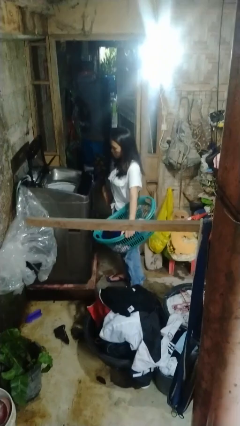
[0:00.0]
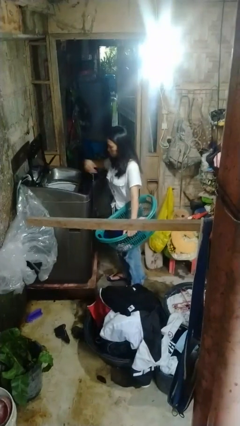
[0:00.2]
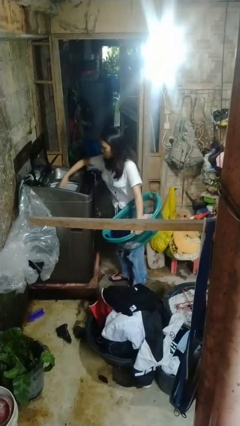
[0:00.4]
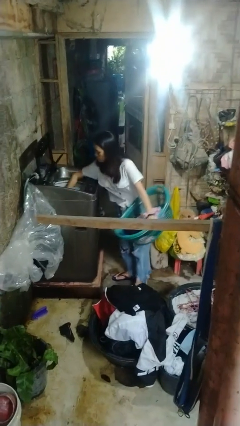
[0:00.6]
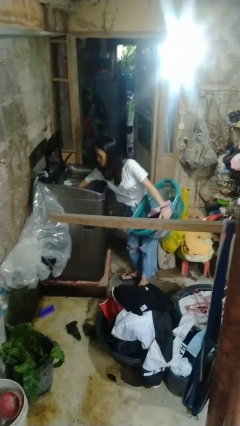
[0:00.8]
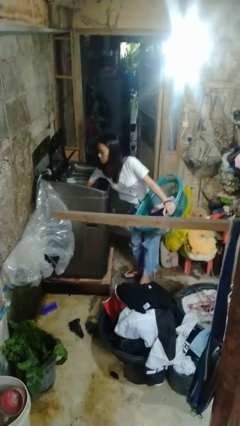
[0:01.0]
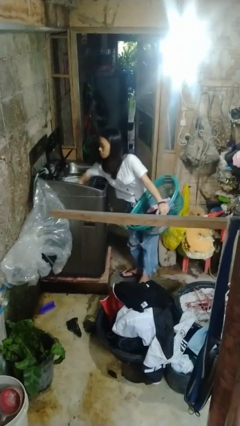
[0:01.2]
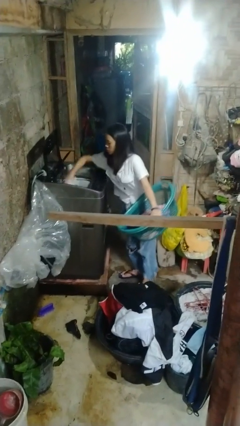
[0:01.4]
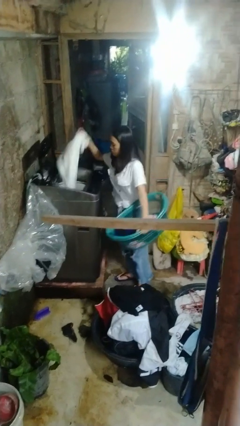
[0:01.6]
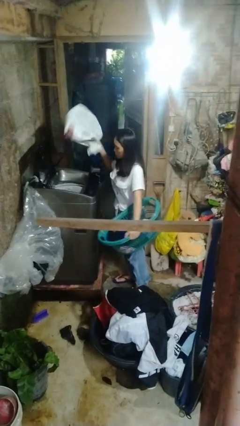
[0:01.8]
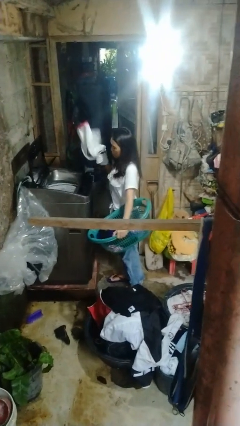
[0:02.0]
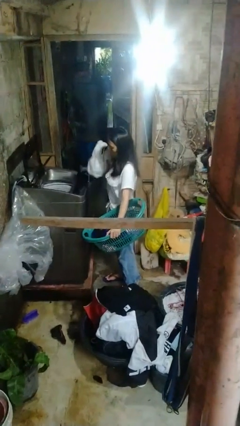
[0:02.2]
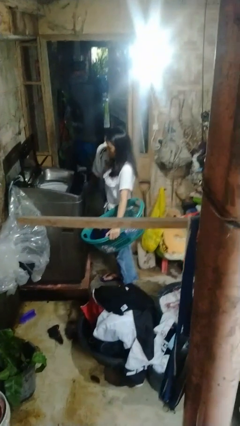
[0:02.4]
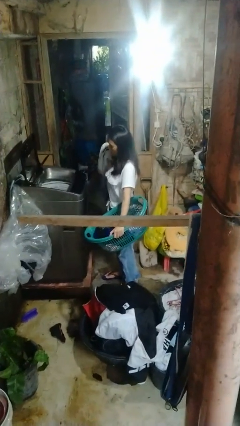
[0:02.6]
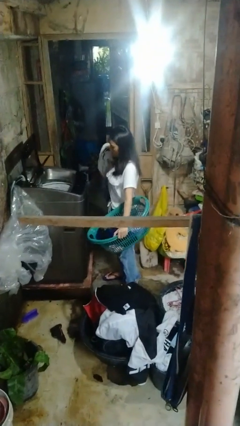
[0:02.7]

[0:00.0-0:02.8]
person unloads clotheswasher

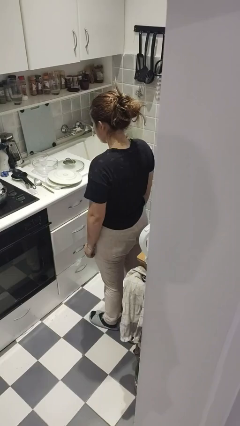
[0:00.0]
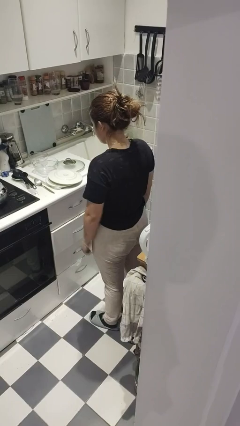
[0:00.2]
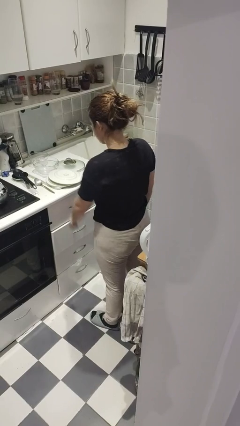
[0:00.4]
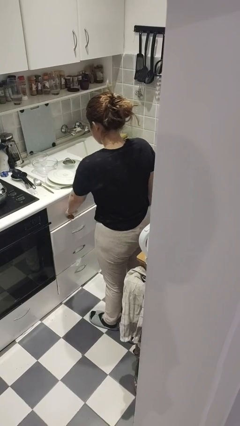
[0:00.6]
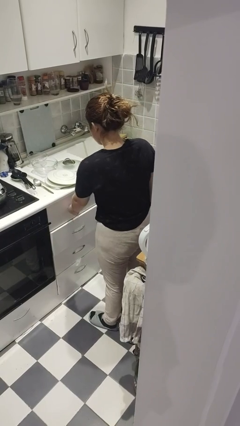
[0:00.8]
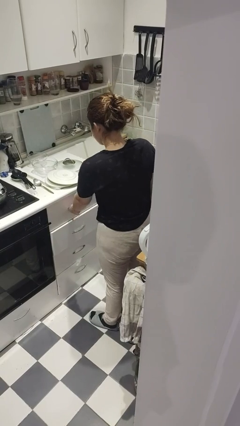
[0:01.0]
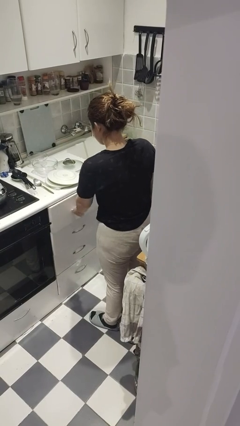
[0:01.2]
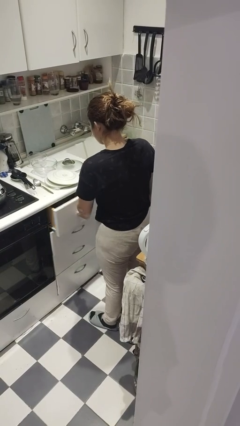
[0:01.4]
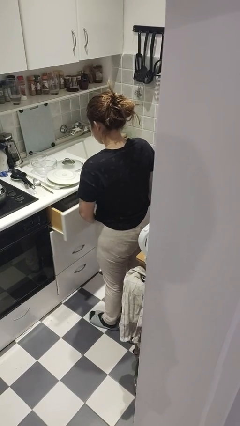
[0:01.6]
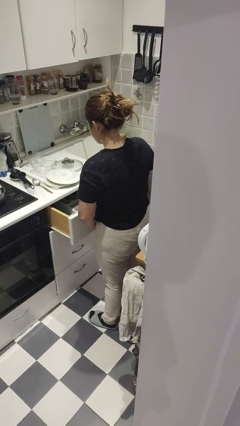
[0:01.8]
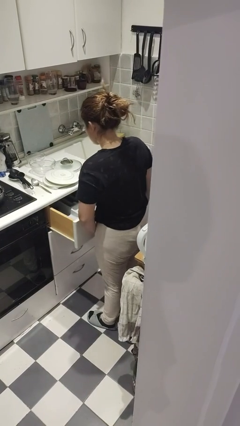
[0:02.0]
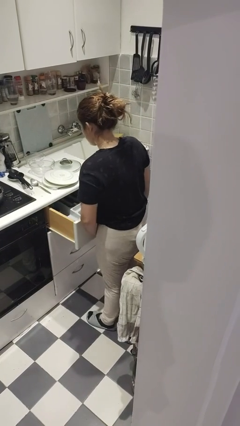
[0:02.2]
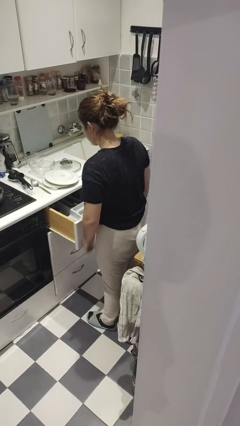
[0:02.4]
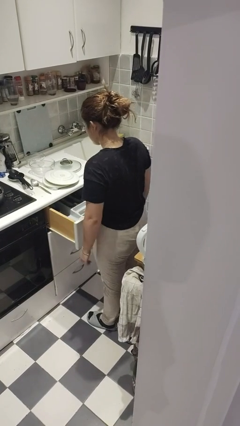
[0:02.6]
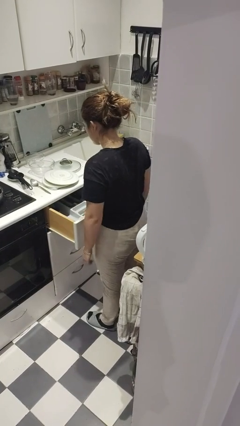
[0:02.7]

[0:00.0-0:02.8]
person opens kitchen drawer

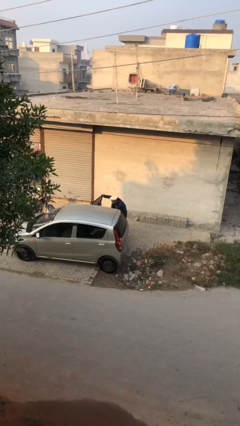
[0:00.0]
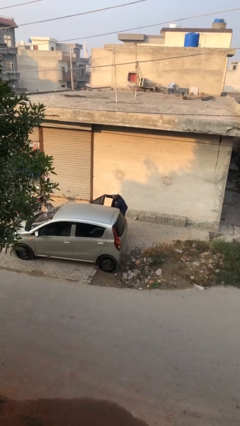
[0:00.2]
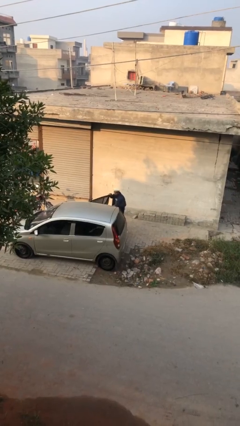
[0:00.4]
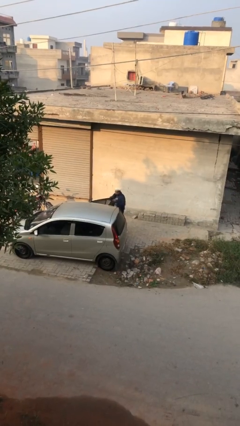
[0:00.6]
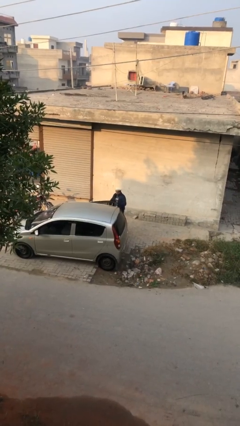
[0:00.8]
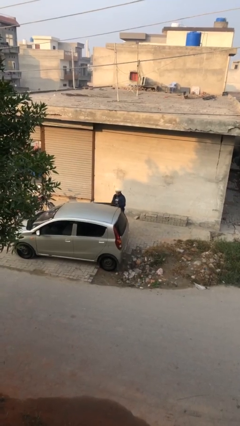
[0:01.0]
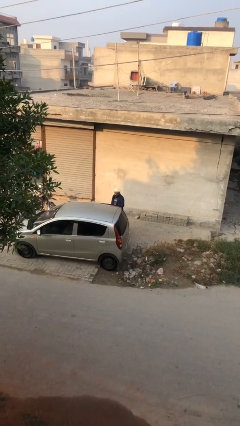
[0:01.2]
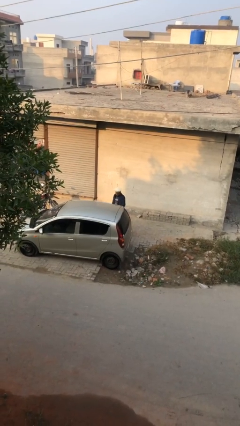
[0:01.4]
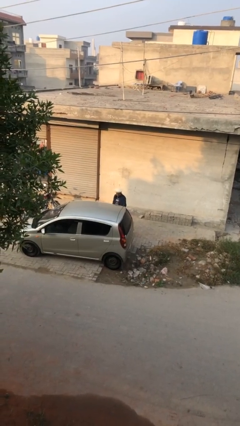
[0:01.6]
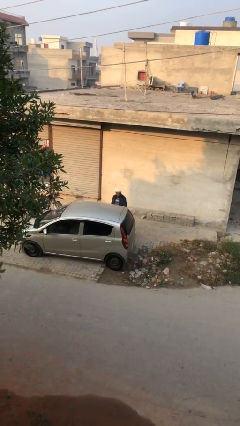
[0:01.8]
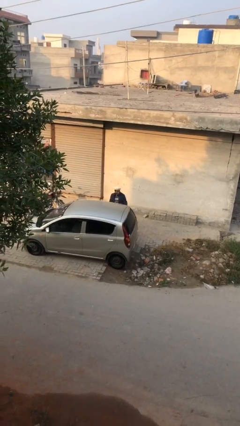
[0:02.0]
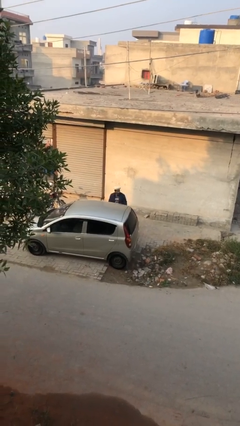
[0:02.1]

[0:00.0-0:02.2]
person closes car door

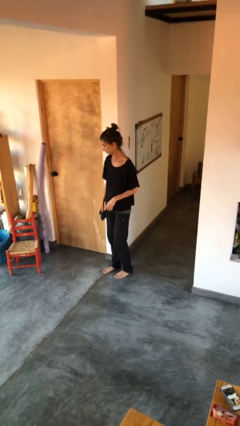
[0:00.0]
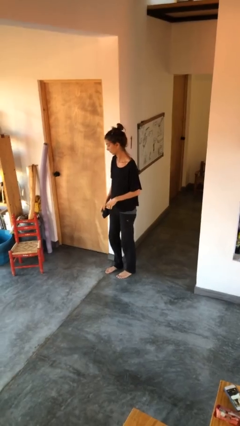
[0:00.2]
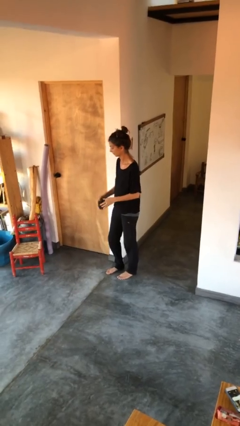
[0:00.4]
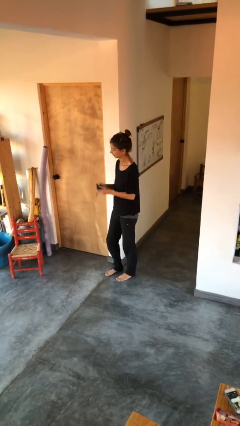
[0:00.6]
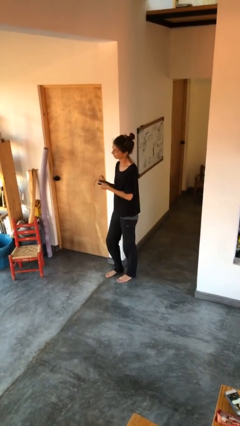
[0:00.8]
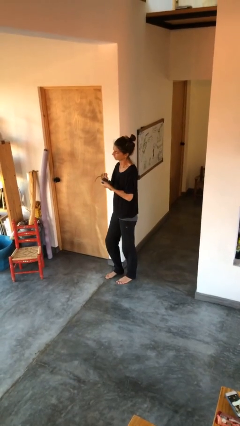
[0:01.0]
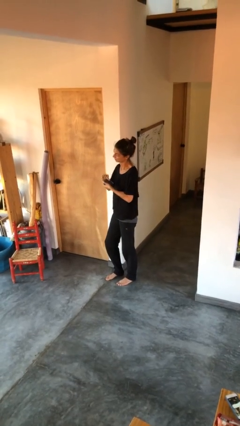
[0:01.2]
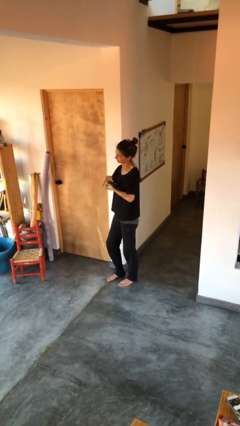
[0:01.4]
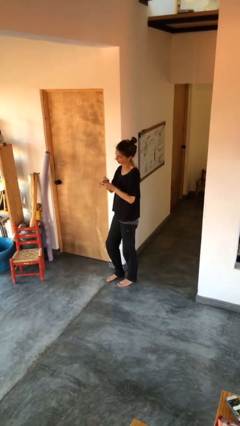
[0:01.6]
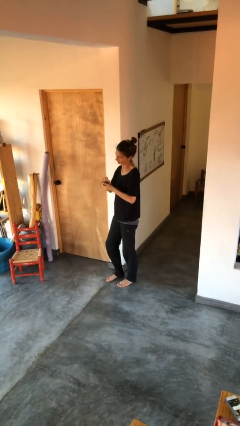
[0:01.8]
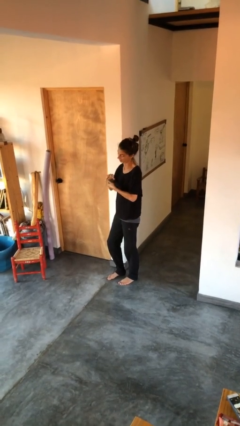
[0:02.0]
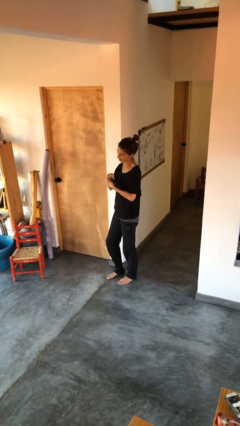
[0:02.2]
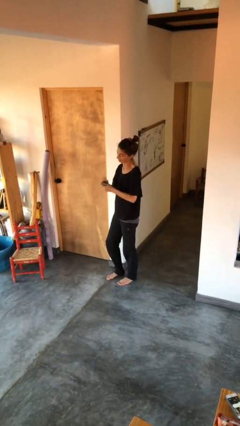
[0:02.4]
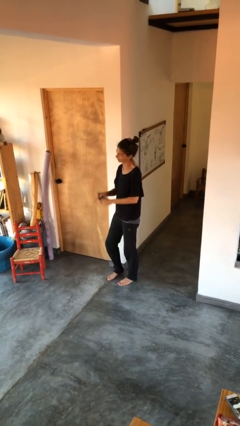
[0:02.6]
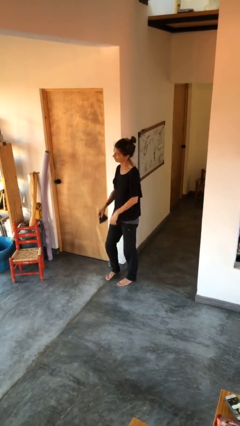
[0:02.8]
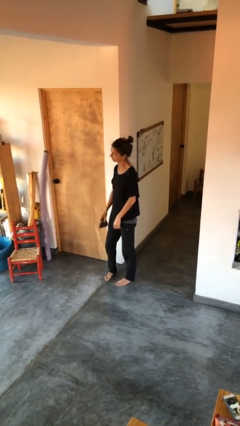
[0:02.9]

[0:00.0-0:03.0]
person squeezes object

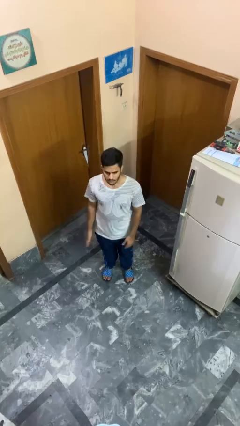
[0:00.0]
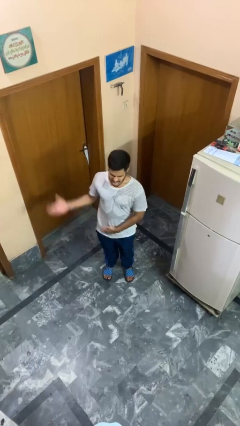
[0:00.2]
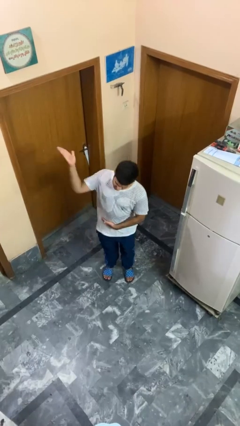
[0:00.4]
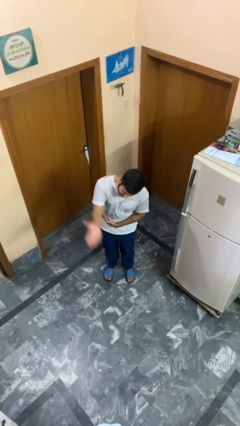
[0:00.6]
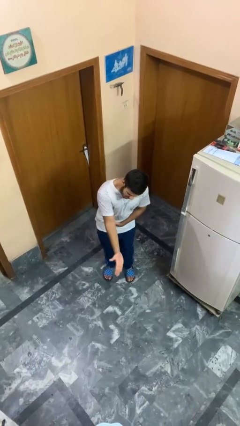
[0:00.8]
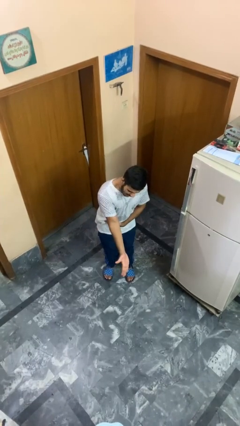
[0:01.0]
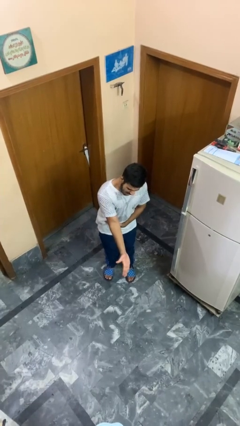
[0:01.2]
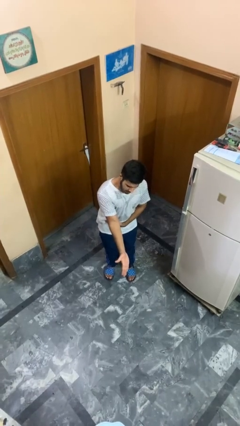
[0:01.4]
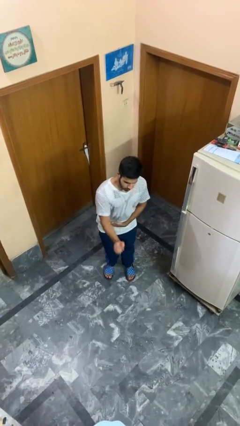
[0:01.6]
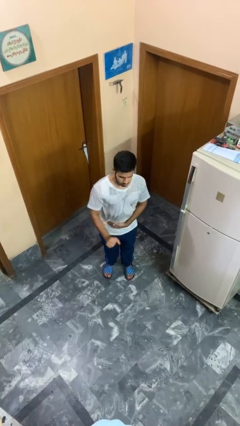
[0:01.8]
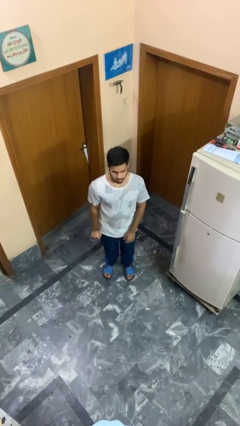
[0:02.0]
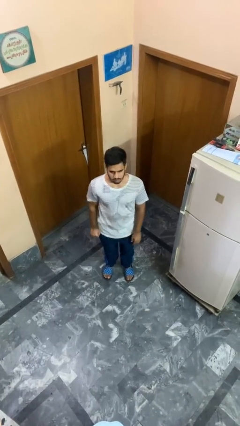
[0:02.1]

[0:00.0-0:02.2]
person karate chop

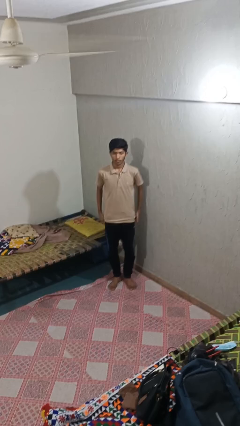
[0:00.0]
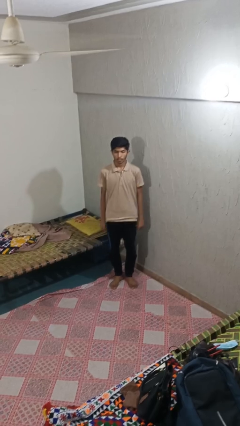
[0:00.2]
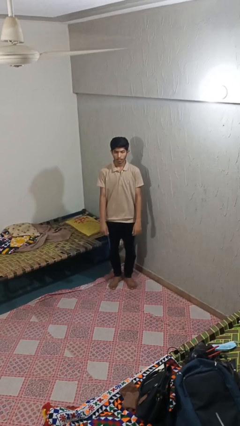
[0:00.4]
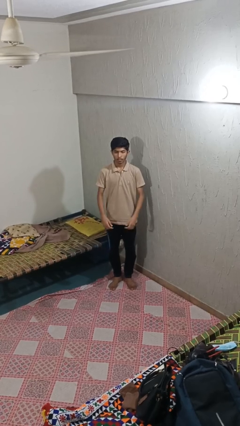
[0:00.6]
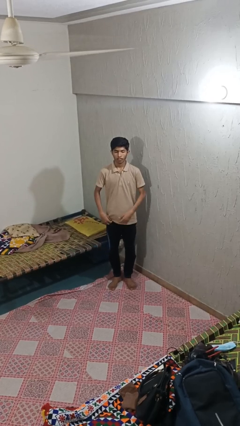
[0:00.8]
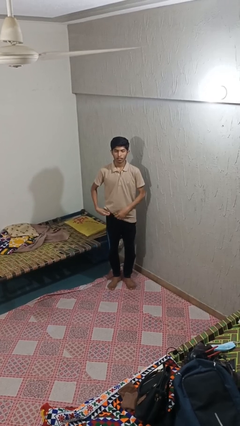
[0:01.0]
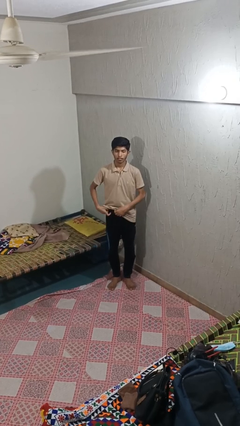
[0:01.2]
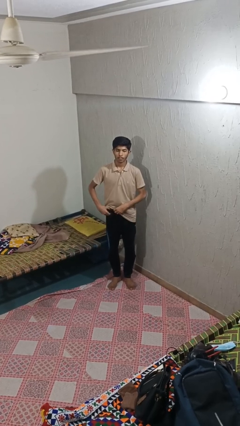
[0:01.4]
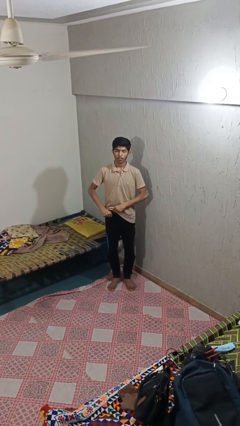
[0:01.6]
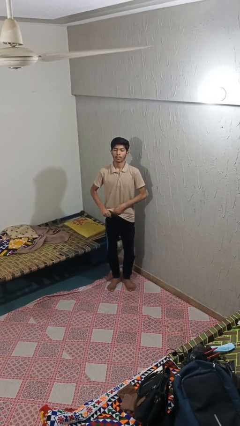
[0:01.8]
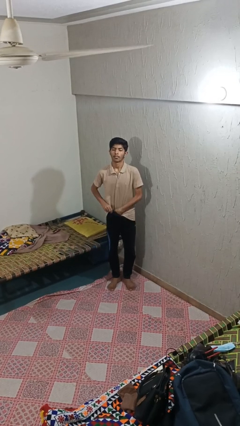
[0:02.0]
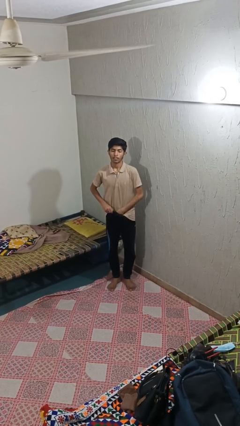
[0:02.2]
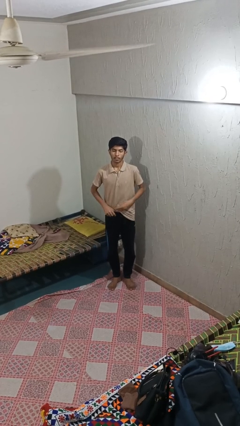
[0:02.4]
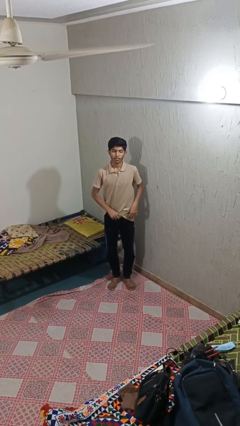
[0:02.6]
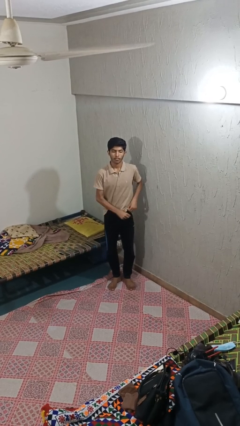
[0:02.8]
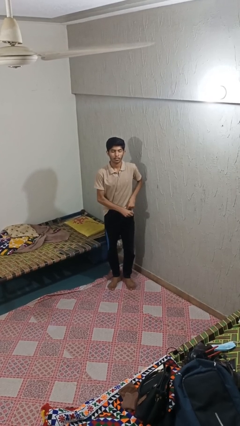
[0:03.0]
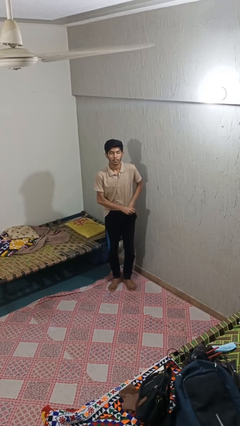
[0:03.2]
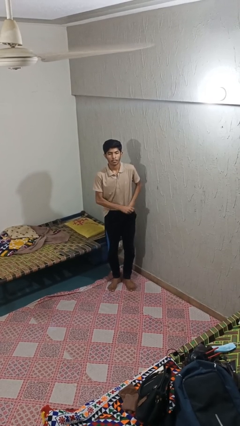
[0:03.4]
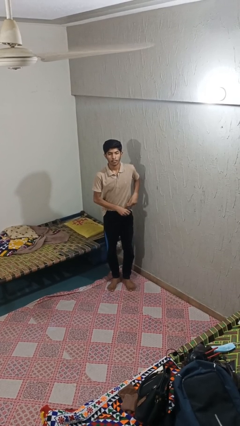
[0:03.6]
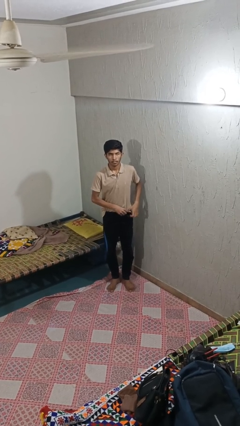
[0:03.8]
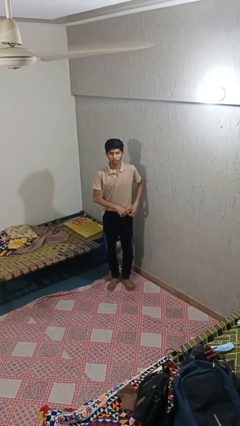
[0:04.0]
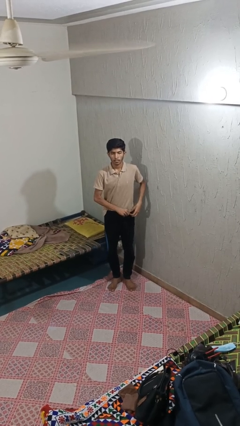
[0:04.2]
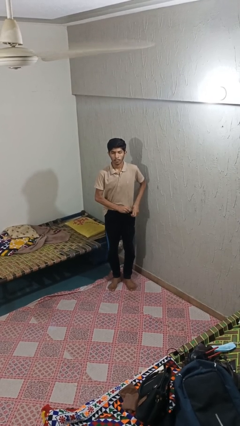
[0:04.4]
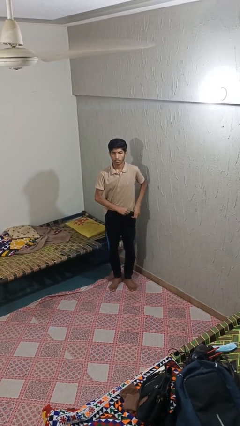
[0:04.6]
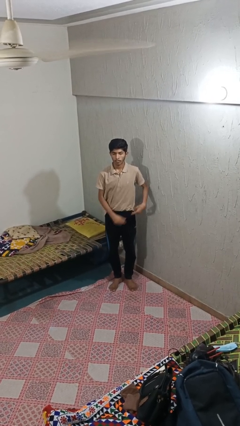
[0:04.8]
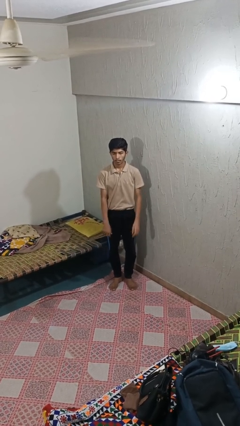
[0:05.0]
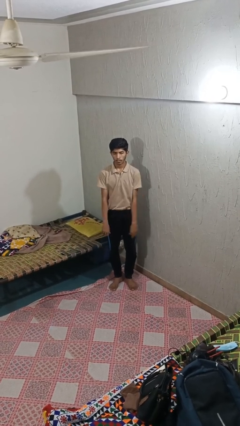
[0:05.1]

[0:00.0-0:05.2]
person tucks in shirt
